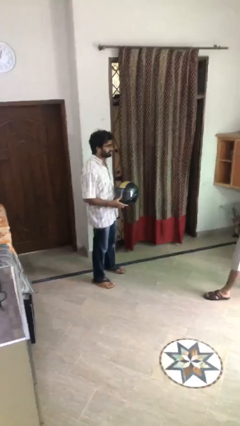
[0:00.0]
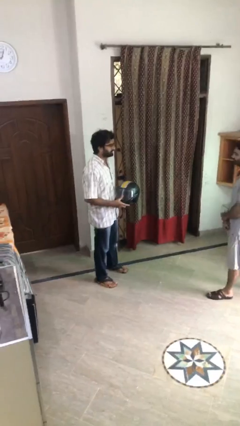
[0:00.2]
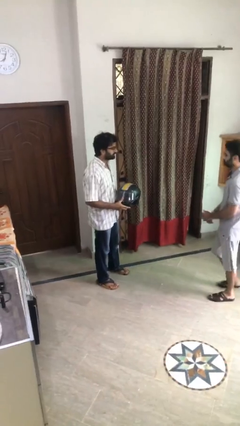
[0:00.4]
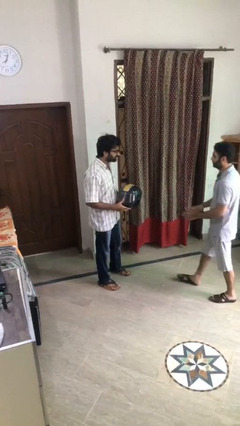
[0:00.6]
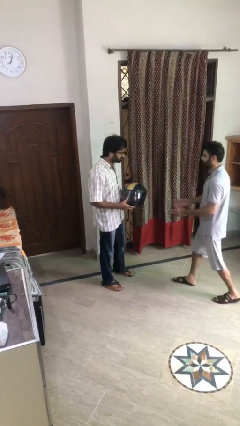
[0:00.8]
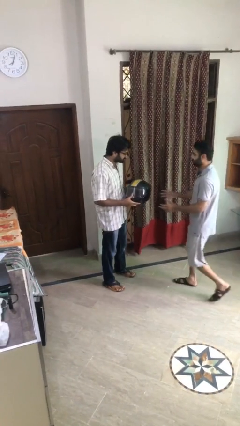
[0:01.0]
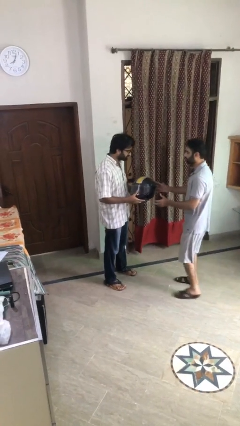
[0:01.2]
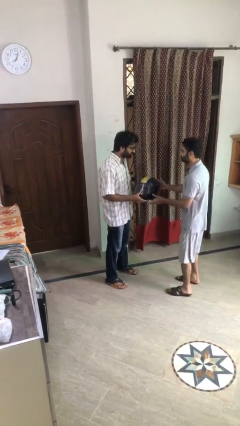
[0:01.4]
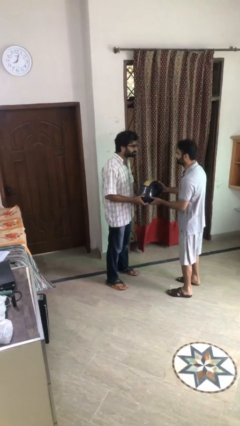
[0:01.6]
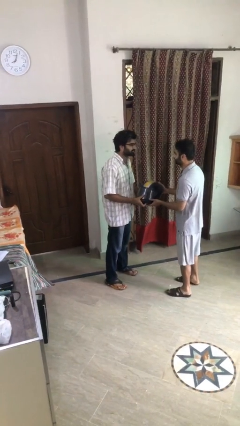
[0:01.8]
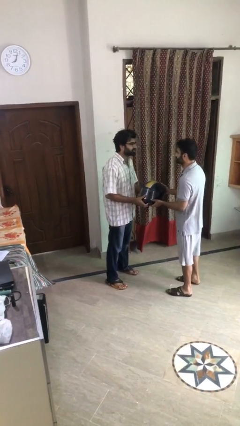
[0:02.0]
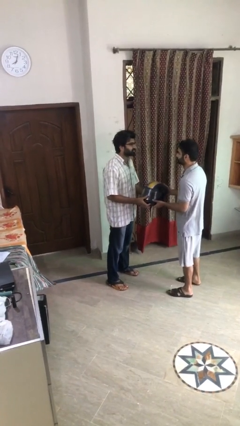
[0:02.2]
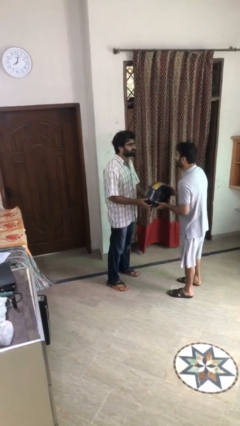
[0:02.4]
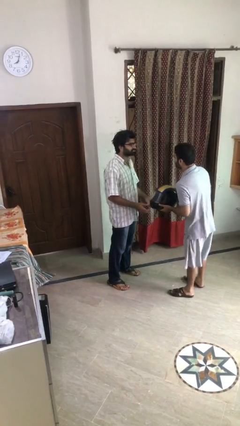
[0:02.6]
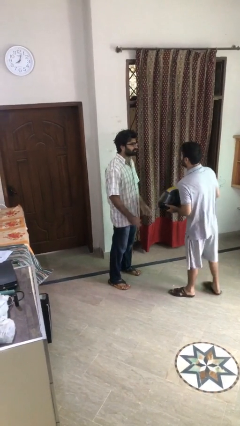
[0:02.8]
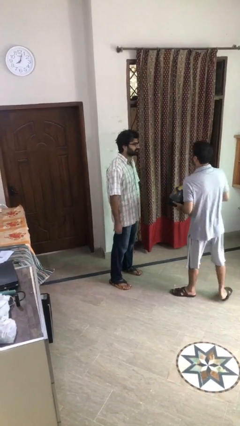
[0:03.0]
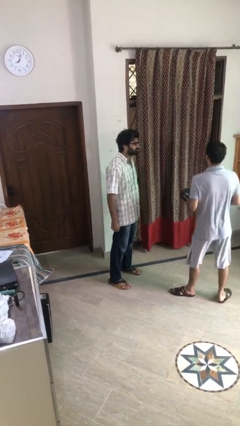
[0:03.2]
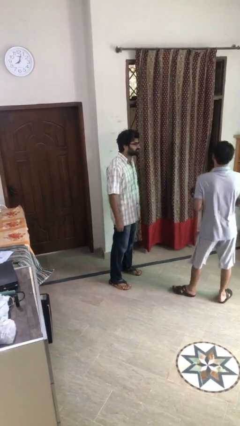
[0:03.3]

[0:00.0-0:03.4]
person transfers object to person

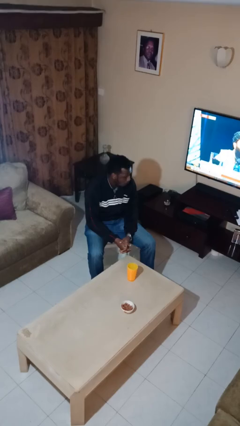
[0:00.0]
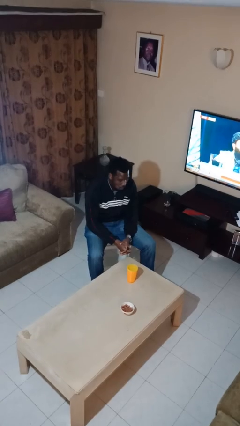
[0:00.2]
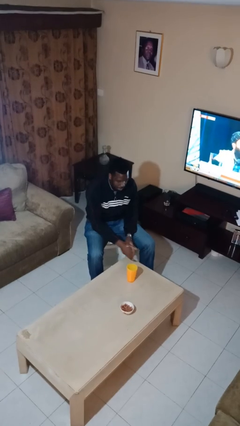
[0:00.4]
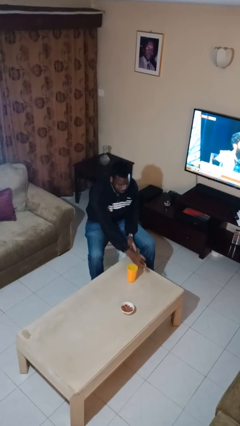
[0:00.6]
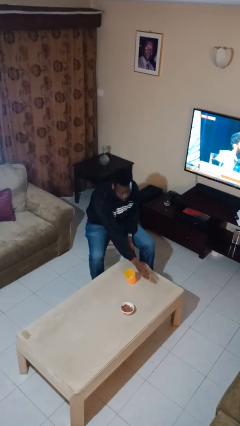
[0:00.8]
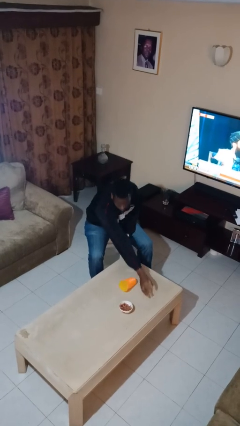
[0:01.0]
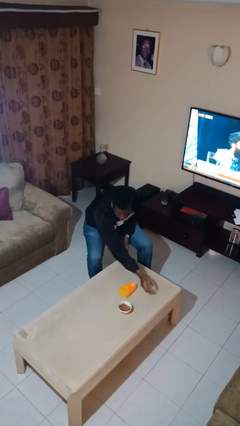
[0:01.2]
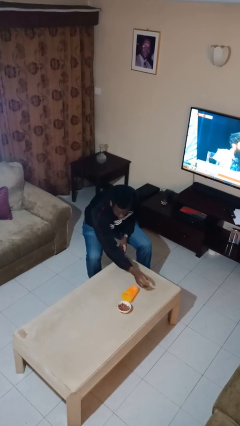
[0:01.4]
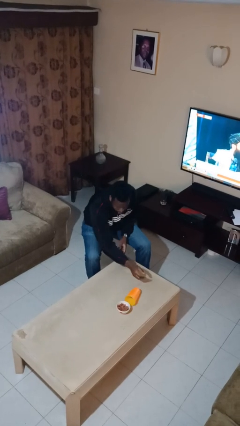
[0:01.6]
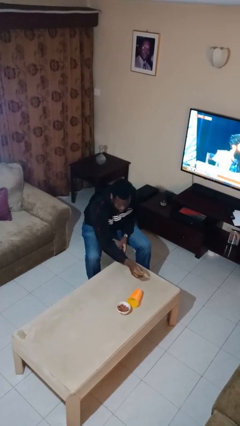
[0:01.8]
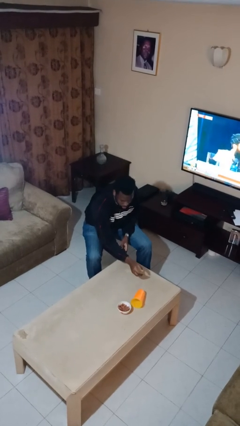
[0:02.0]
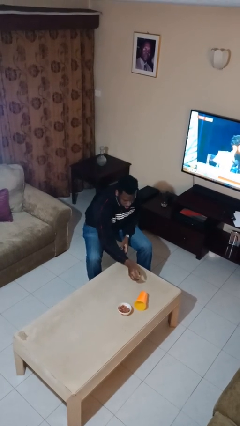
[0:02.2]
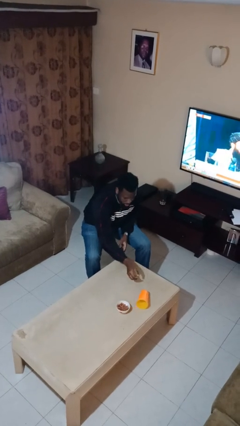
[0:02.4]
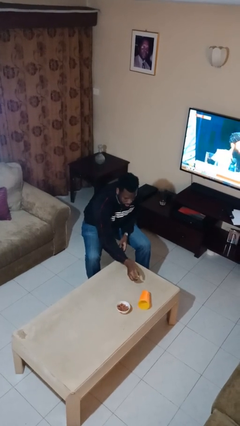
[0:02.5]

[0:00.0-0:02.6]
person knocks over glass

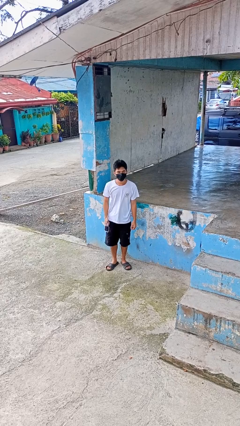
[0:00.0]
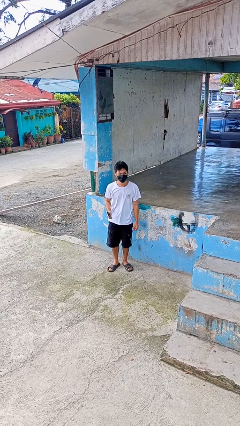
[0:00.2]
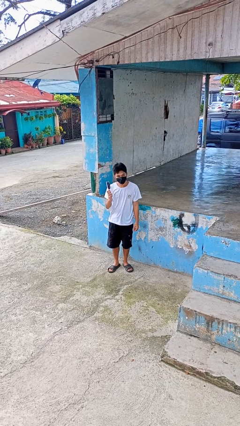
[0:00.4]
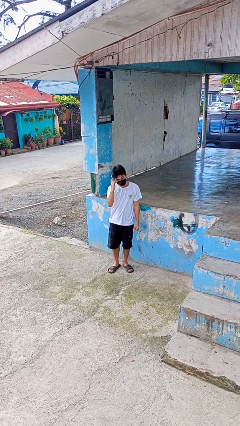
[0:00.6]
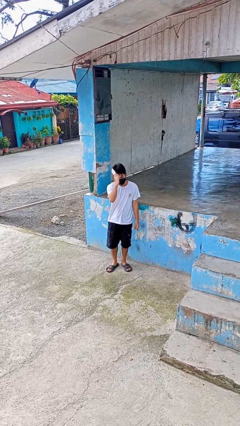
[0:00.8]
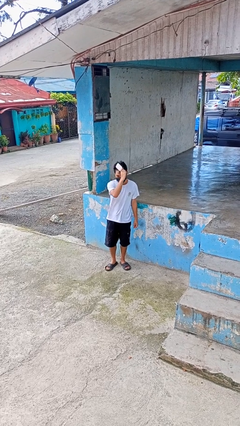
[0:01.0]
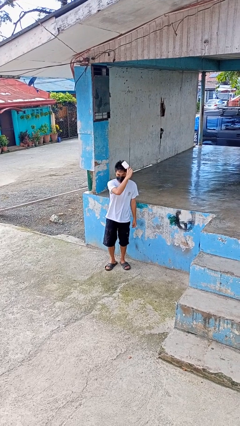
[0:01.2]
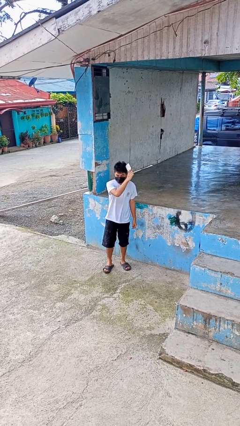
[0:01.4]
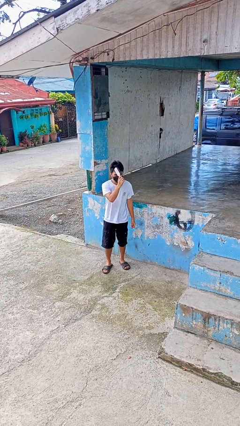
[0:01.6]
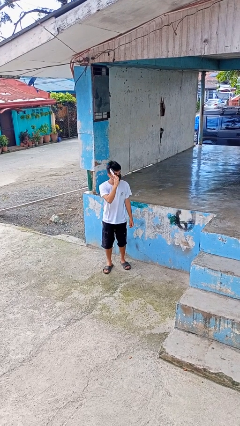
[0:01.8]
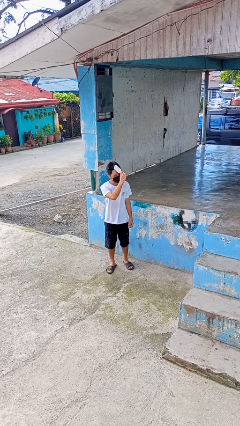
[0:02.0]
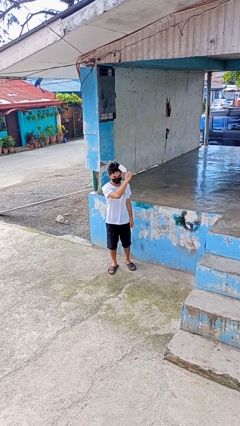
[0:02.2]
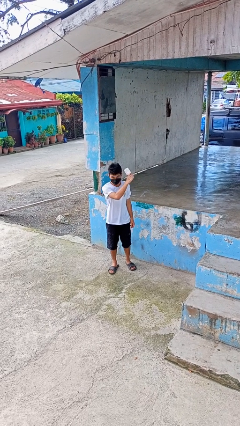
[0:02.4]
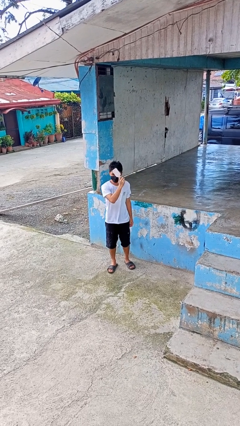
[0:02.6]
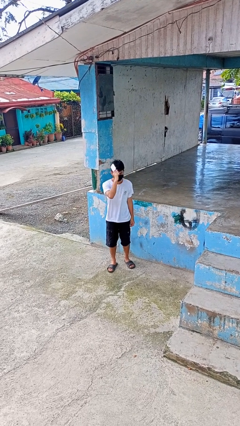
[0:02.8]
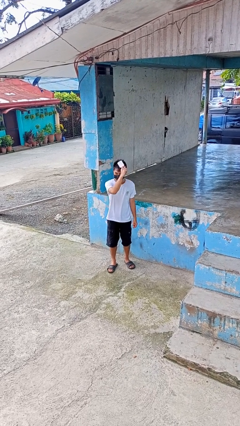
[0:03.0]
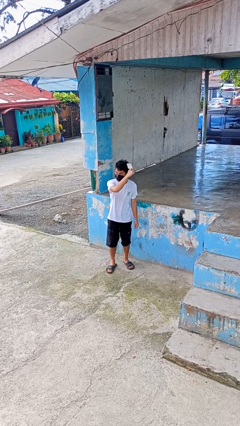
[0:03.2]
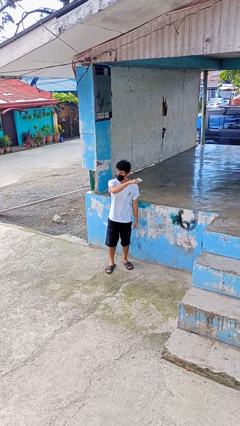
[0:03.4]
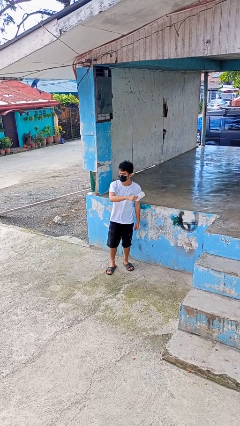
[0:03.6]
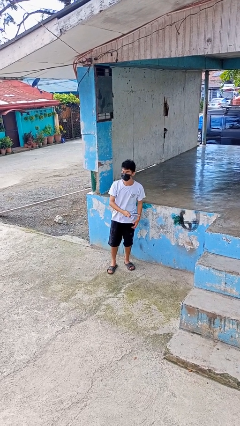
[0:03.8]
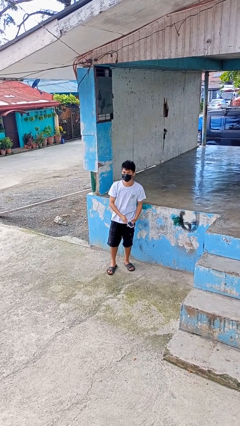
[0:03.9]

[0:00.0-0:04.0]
person brushes hair

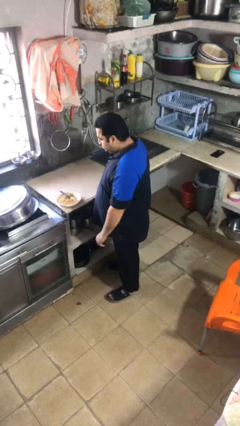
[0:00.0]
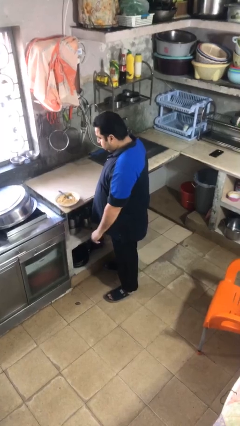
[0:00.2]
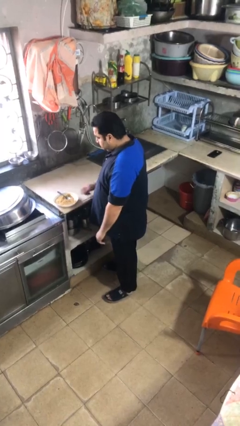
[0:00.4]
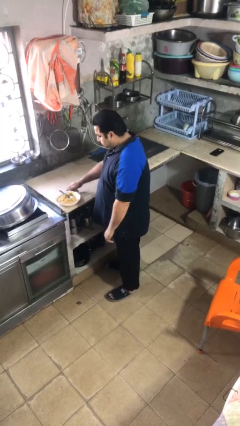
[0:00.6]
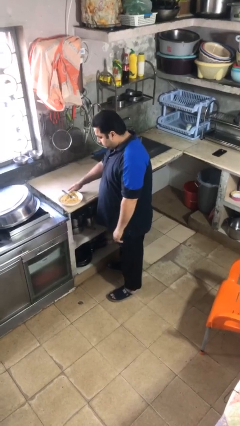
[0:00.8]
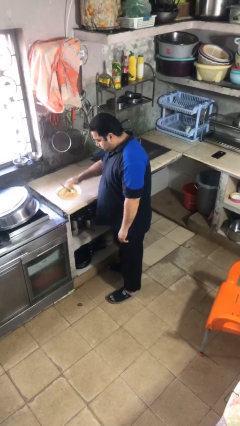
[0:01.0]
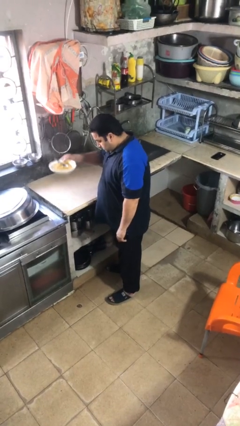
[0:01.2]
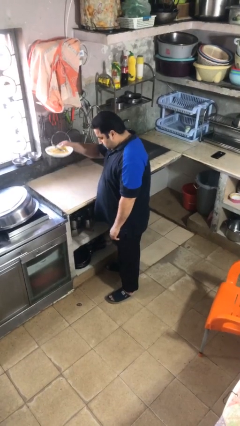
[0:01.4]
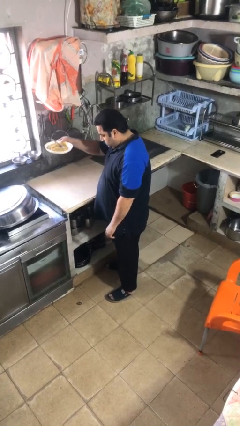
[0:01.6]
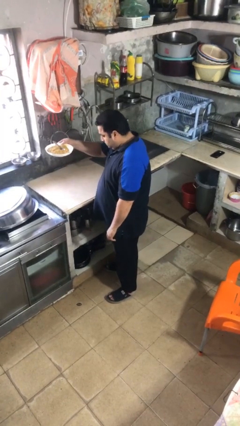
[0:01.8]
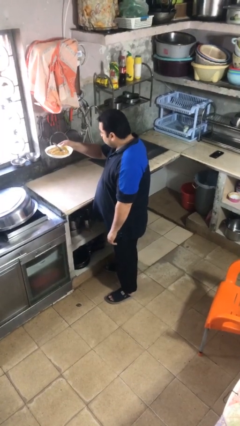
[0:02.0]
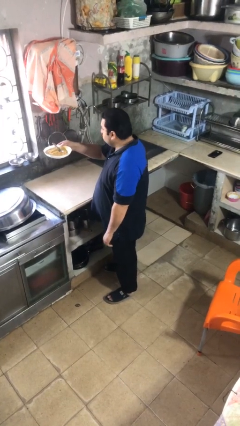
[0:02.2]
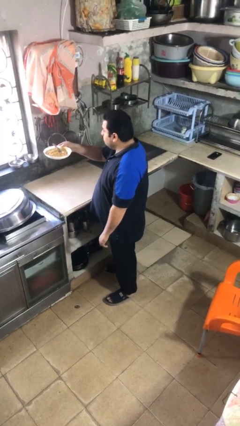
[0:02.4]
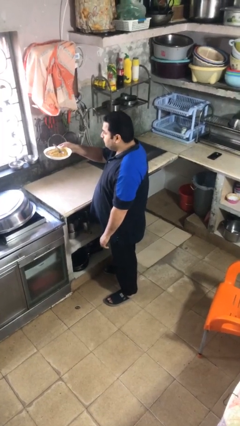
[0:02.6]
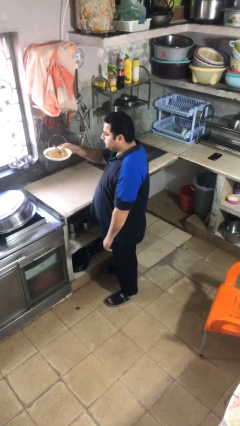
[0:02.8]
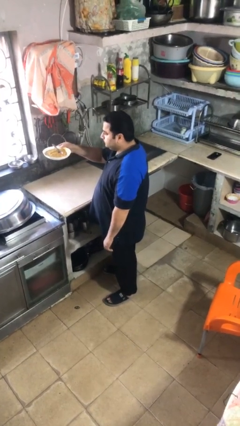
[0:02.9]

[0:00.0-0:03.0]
person picks up object from countertop

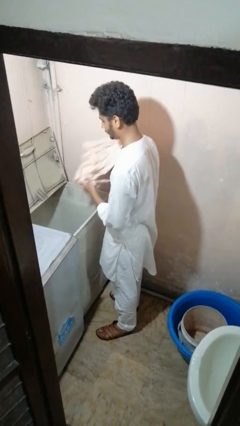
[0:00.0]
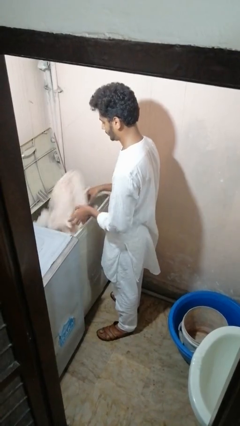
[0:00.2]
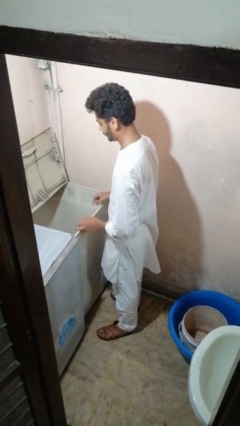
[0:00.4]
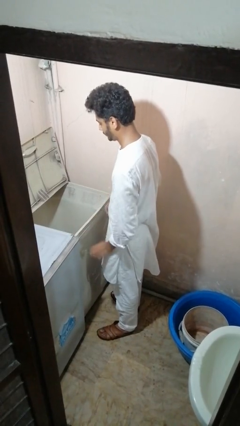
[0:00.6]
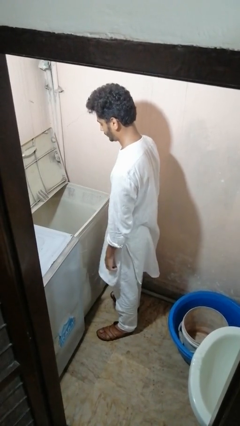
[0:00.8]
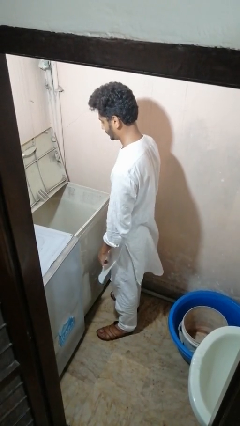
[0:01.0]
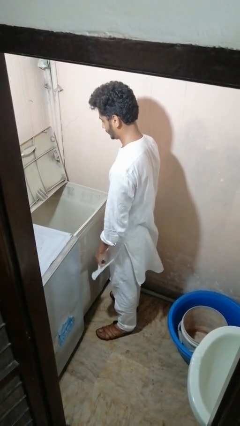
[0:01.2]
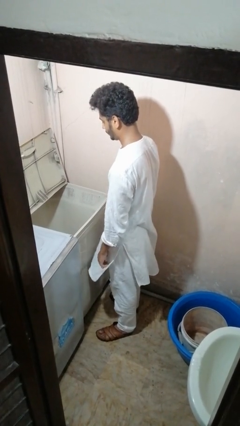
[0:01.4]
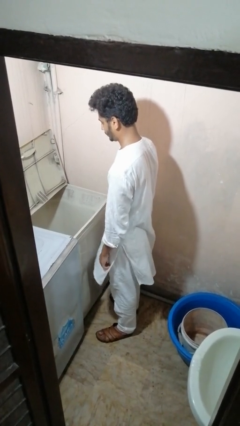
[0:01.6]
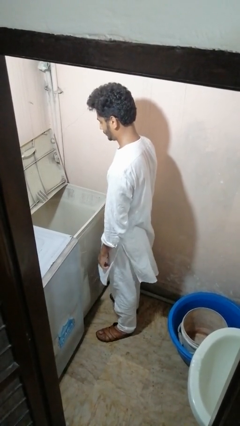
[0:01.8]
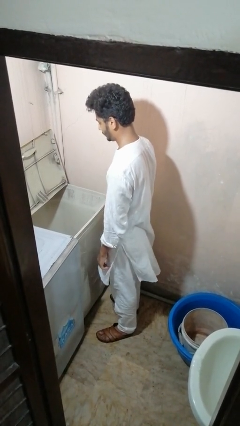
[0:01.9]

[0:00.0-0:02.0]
person loads clotheswasher

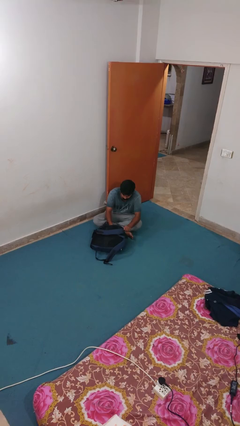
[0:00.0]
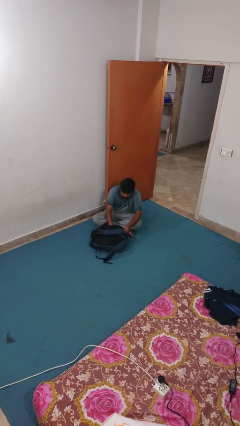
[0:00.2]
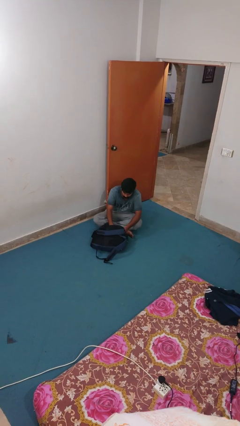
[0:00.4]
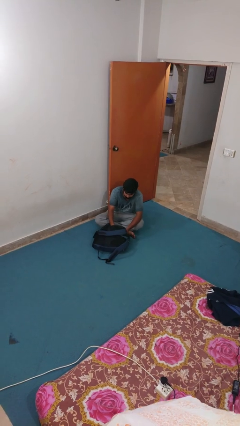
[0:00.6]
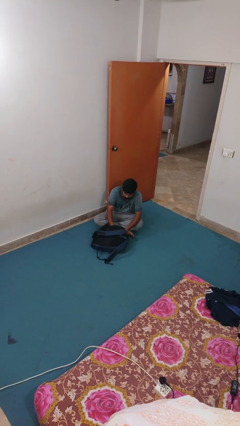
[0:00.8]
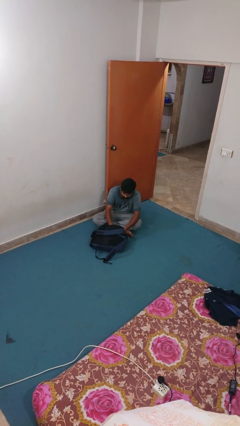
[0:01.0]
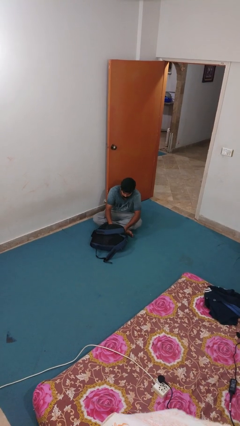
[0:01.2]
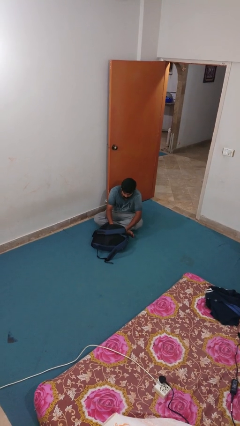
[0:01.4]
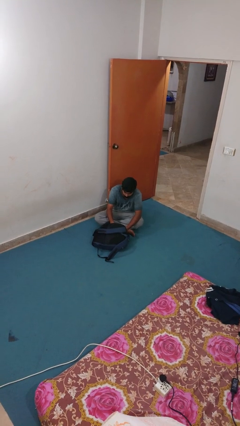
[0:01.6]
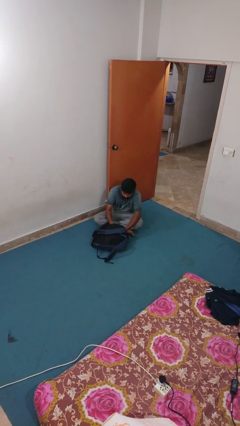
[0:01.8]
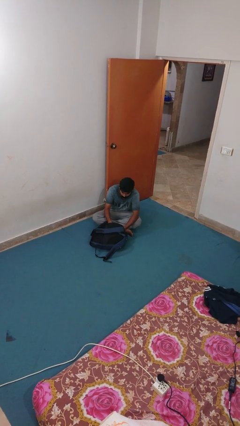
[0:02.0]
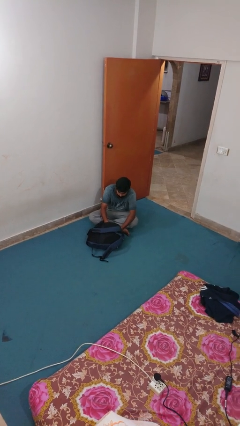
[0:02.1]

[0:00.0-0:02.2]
person searches in backpack
